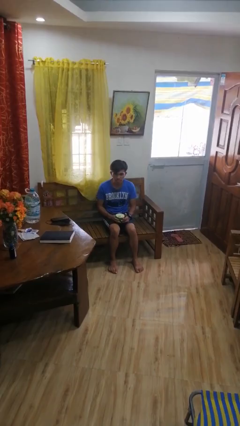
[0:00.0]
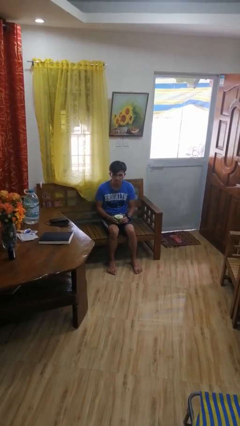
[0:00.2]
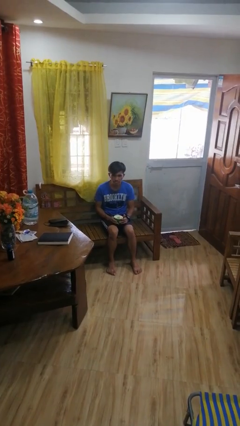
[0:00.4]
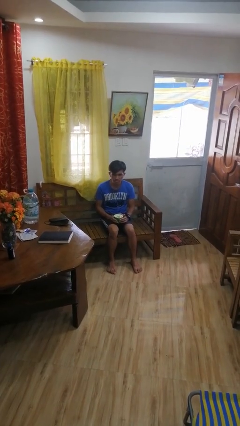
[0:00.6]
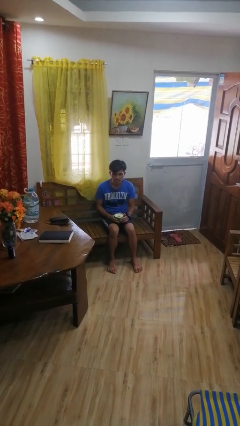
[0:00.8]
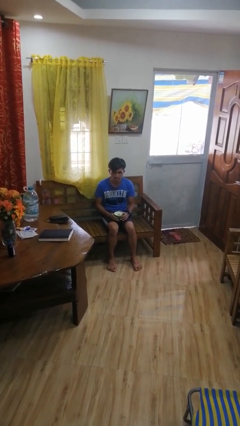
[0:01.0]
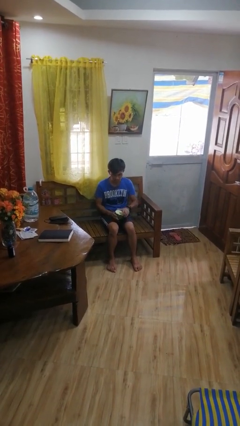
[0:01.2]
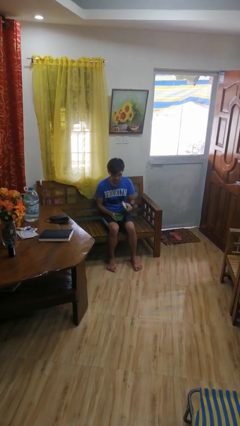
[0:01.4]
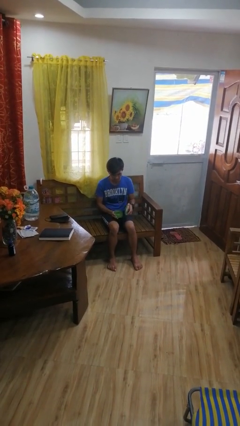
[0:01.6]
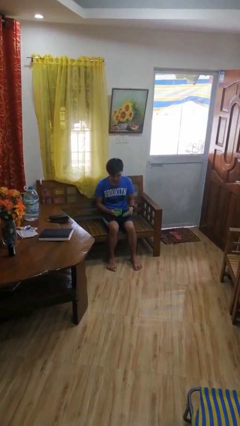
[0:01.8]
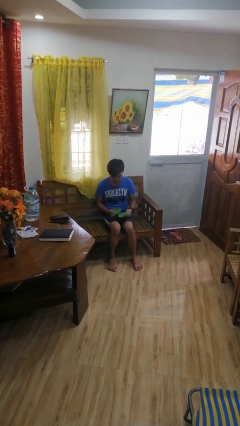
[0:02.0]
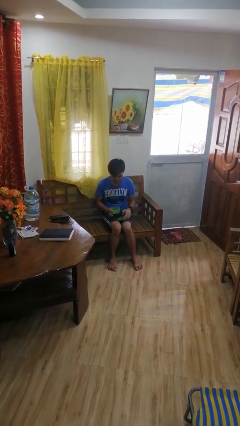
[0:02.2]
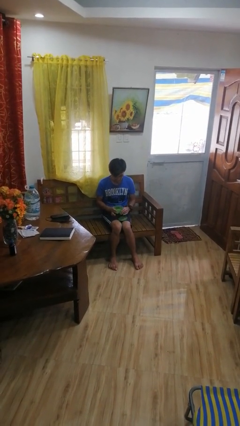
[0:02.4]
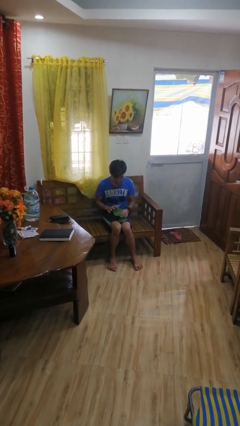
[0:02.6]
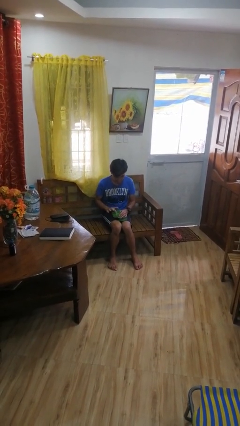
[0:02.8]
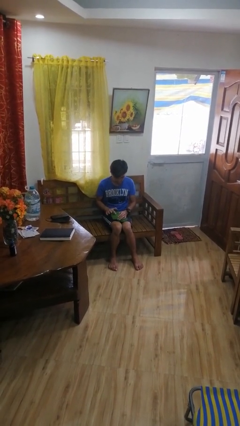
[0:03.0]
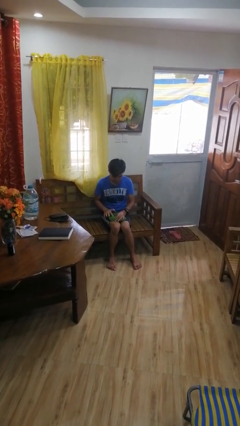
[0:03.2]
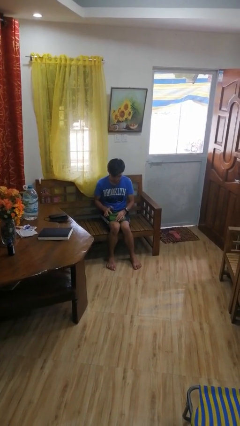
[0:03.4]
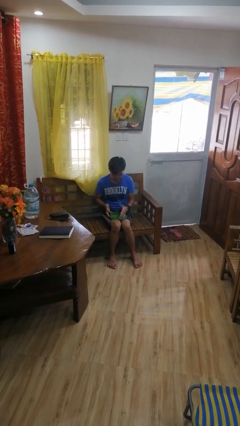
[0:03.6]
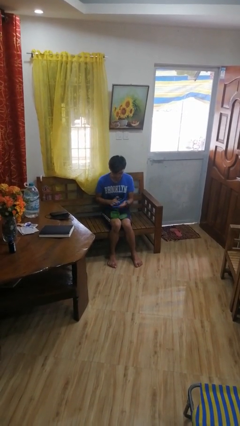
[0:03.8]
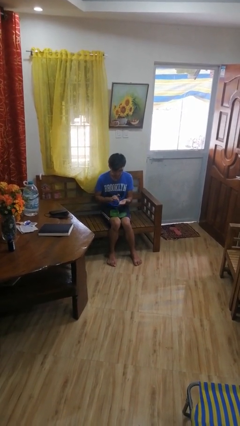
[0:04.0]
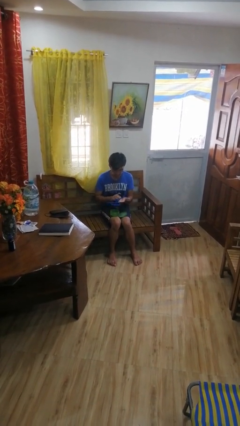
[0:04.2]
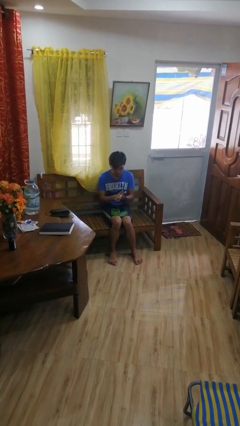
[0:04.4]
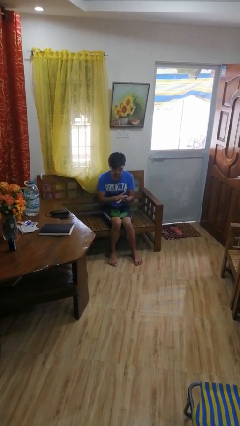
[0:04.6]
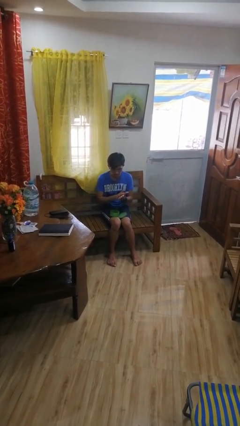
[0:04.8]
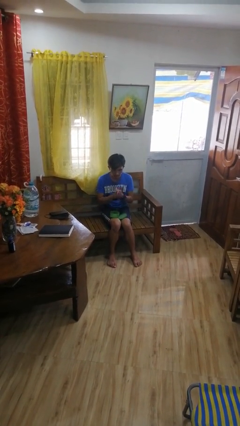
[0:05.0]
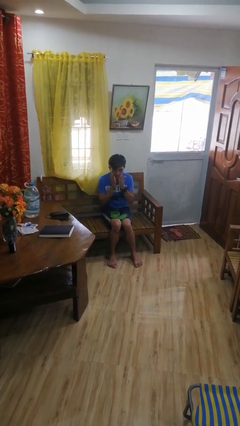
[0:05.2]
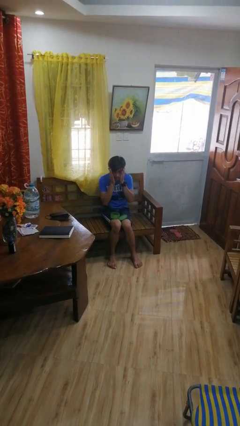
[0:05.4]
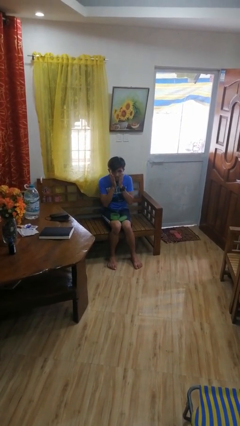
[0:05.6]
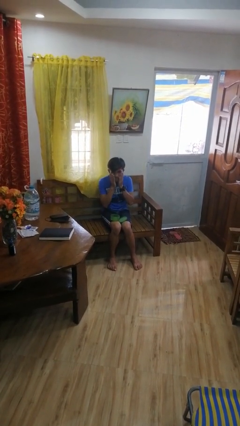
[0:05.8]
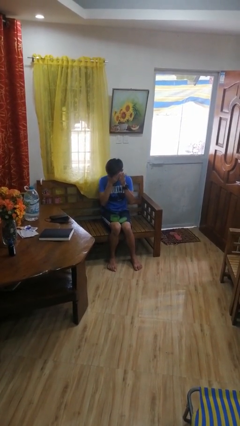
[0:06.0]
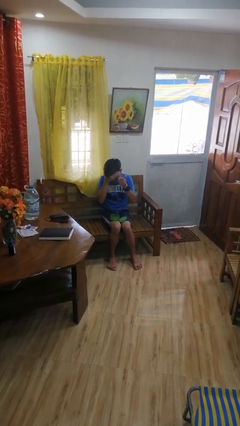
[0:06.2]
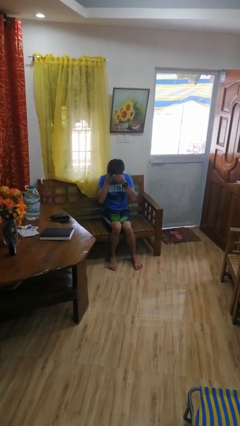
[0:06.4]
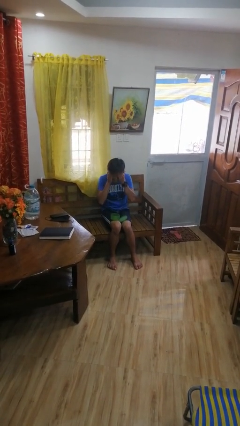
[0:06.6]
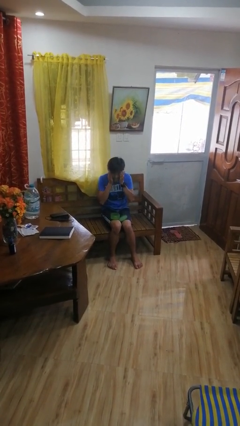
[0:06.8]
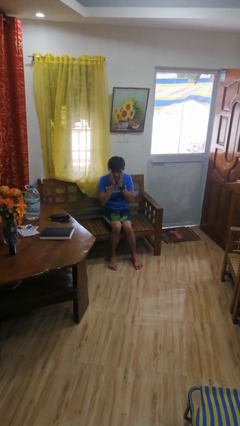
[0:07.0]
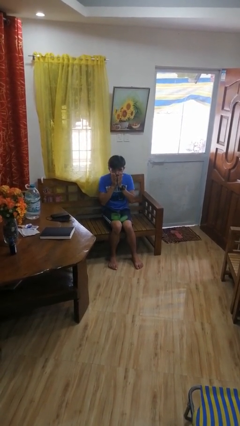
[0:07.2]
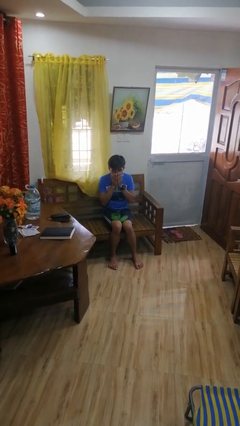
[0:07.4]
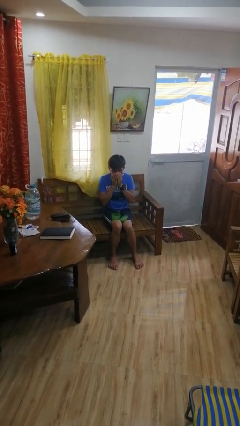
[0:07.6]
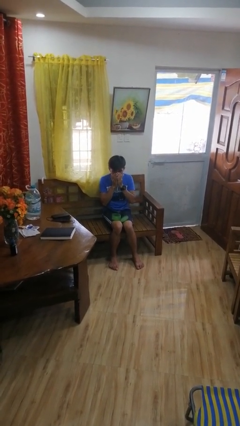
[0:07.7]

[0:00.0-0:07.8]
person applies facial moisturizer

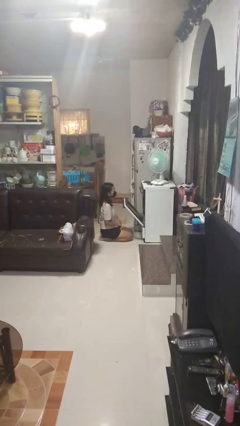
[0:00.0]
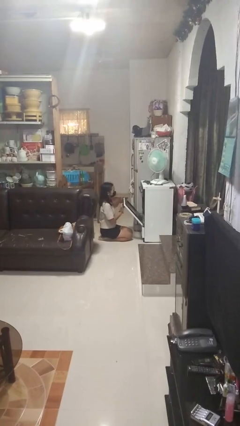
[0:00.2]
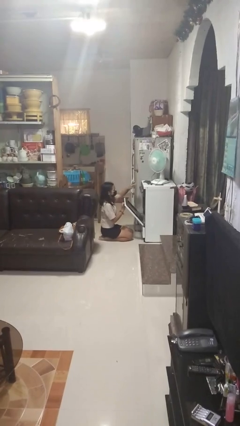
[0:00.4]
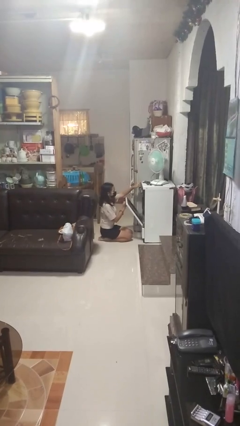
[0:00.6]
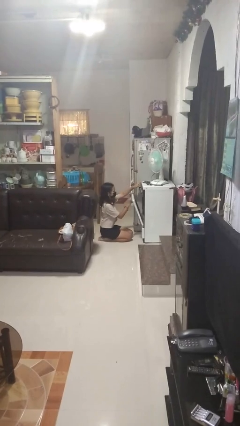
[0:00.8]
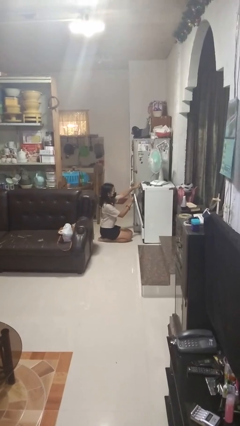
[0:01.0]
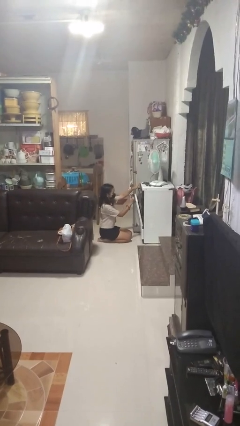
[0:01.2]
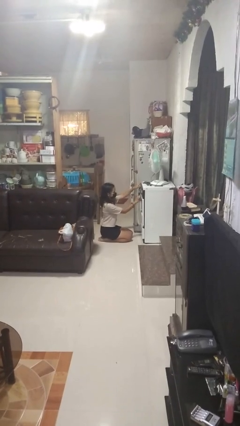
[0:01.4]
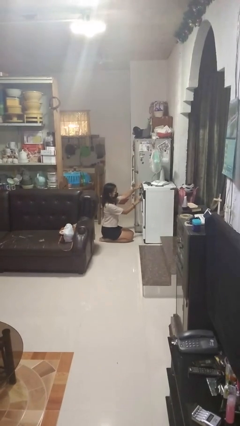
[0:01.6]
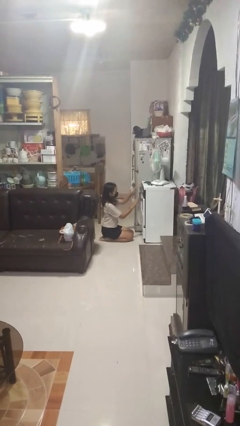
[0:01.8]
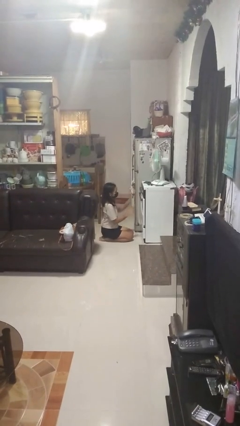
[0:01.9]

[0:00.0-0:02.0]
person closes oven door

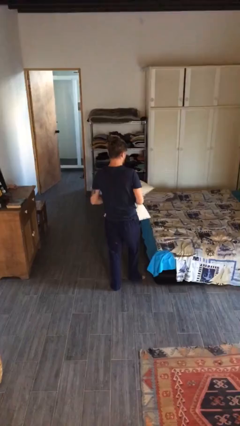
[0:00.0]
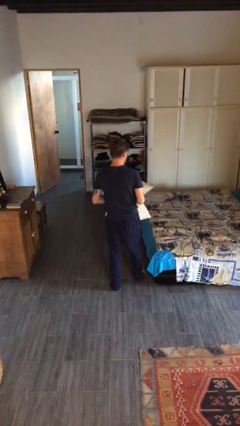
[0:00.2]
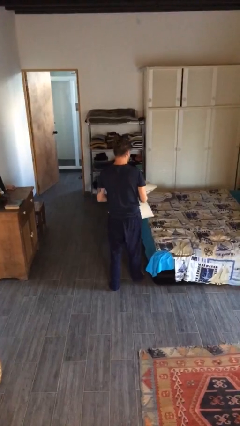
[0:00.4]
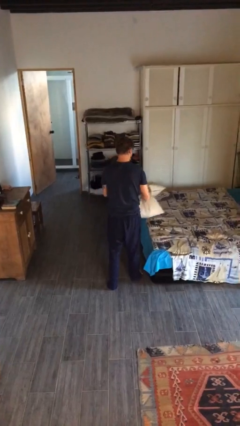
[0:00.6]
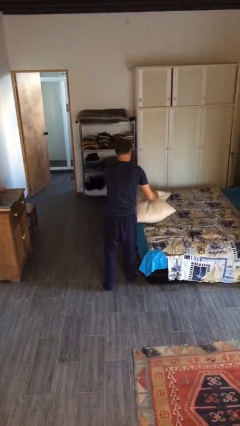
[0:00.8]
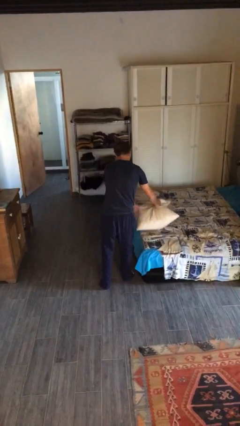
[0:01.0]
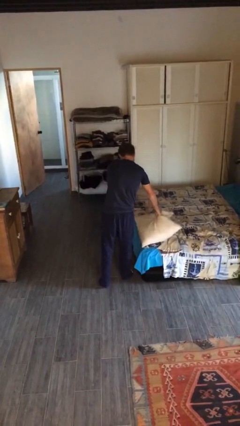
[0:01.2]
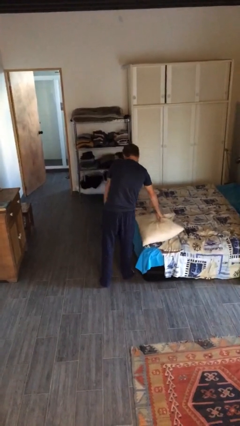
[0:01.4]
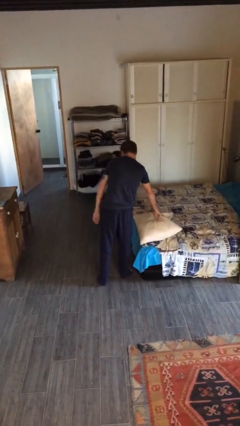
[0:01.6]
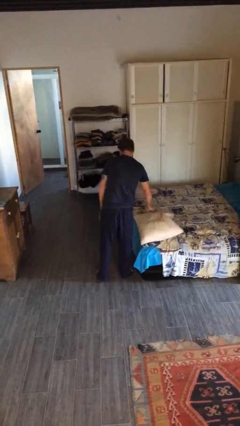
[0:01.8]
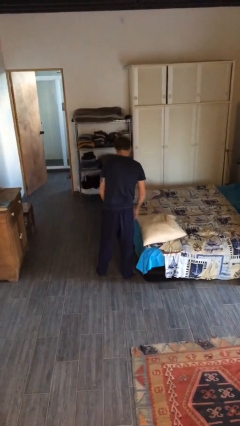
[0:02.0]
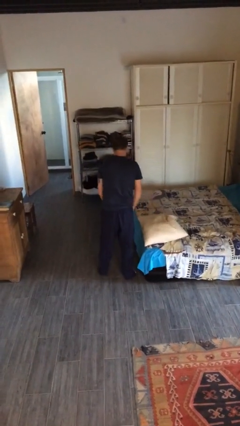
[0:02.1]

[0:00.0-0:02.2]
person puts down object on bed

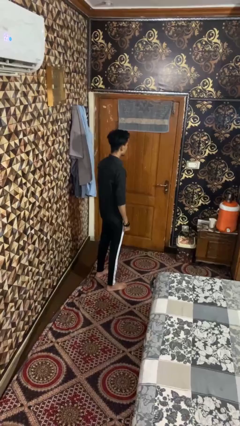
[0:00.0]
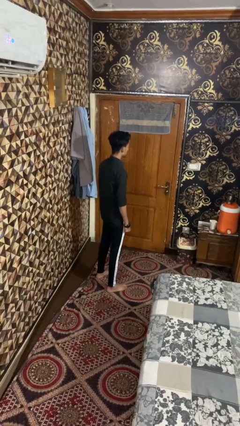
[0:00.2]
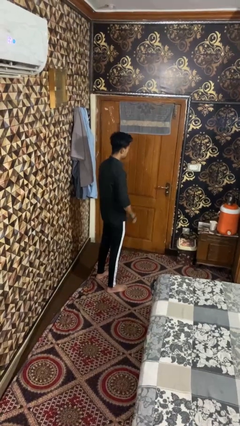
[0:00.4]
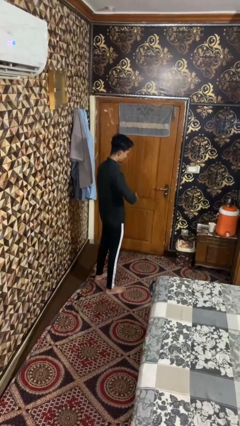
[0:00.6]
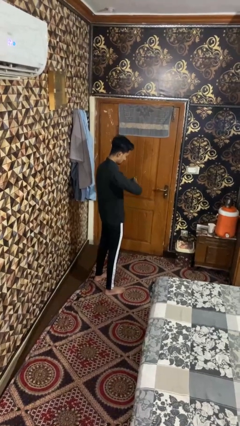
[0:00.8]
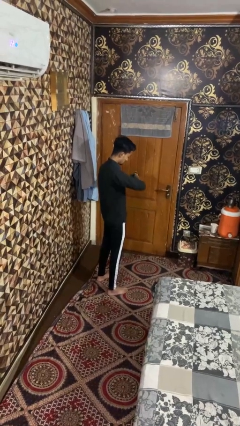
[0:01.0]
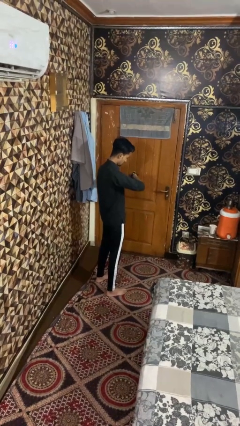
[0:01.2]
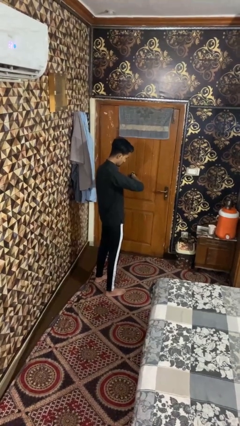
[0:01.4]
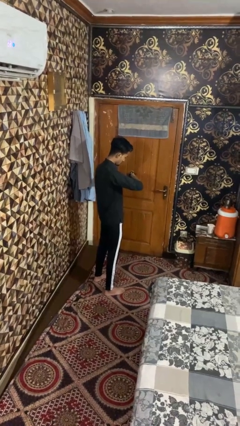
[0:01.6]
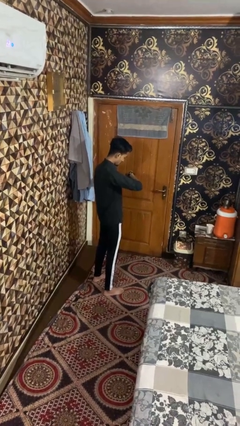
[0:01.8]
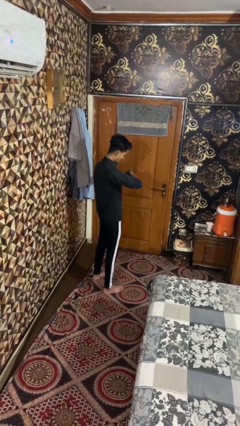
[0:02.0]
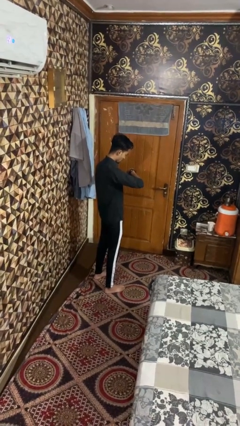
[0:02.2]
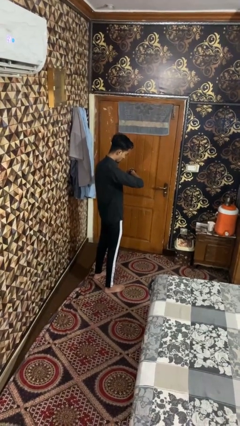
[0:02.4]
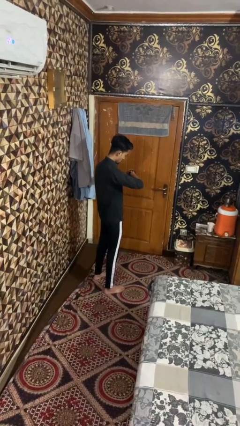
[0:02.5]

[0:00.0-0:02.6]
person looks at wristwatch

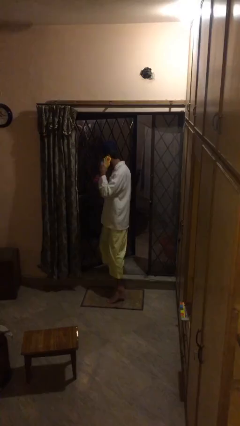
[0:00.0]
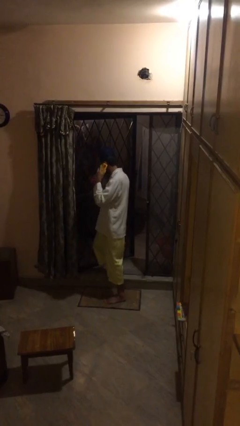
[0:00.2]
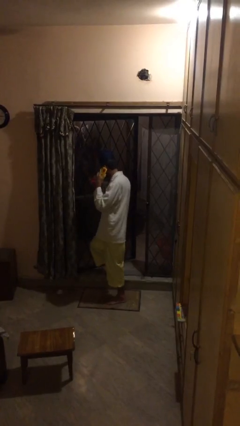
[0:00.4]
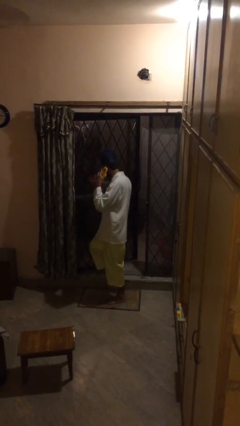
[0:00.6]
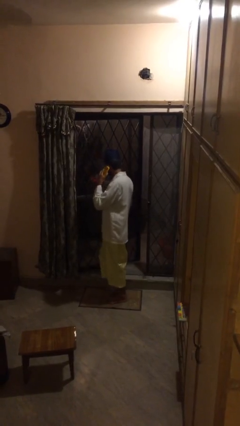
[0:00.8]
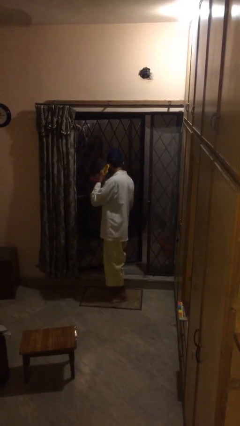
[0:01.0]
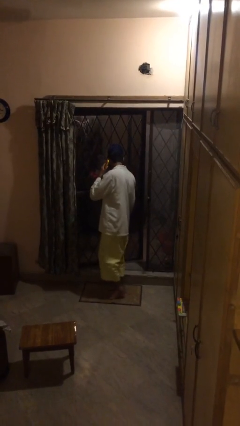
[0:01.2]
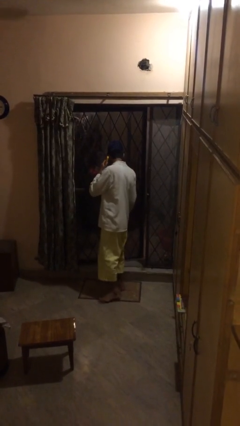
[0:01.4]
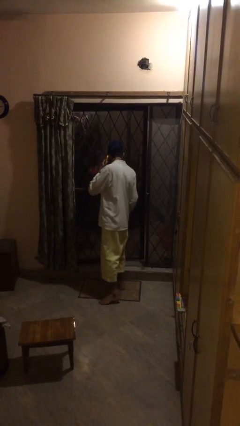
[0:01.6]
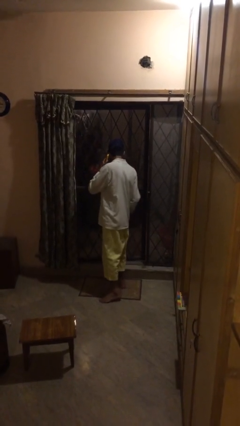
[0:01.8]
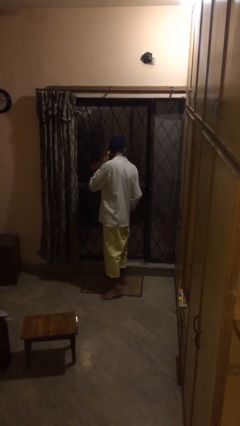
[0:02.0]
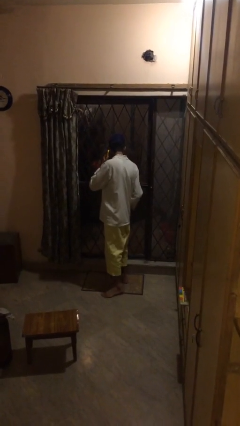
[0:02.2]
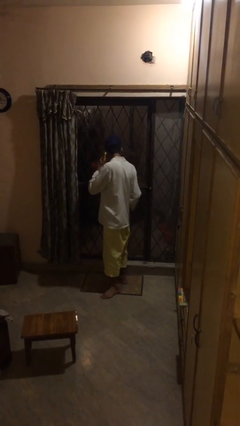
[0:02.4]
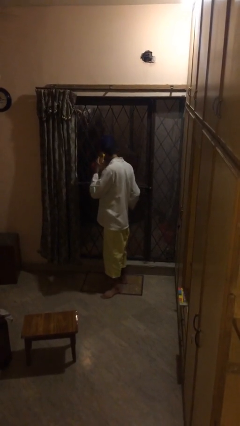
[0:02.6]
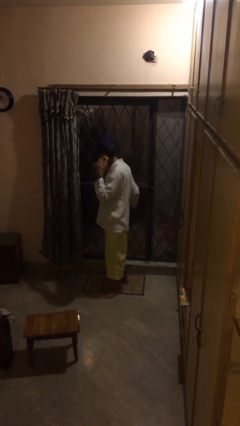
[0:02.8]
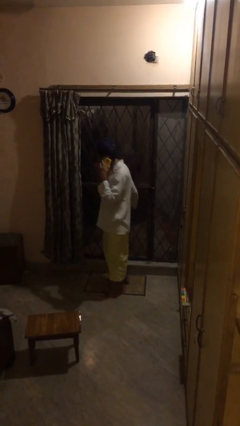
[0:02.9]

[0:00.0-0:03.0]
person closes facility door
